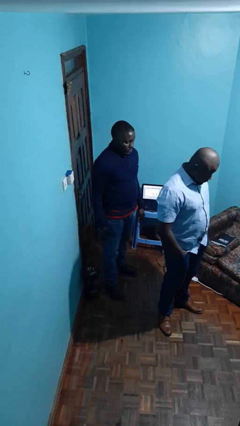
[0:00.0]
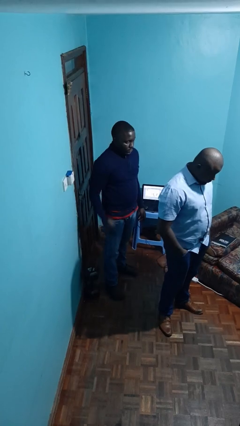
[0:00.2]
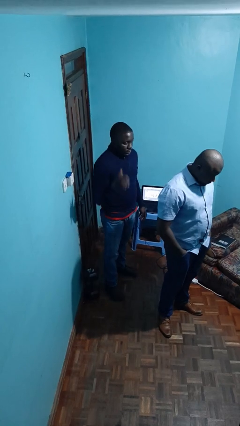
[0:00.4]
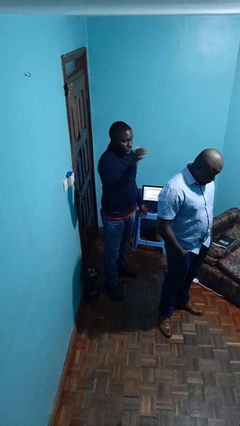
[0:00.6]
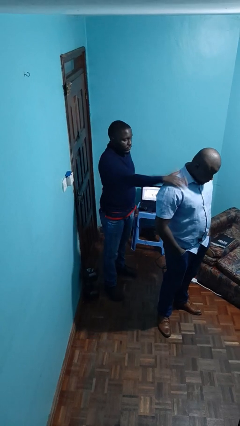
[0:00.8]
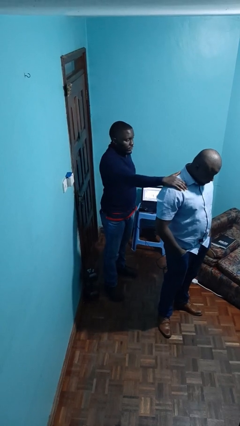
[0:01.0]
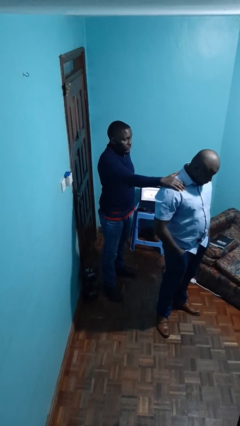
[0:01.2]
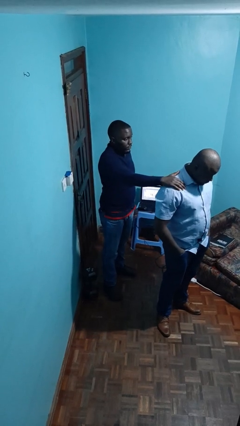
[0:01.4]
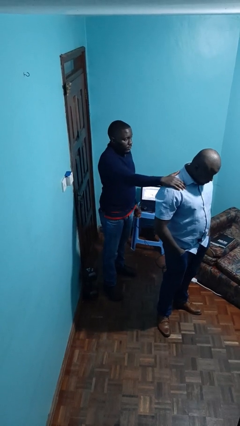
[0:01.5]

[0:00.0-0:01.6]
person grabs person by shoulder

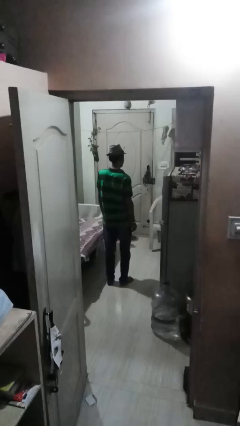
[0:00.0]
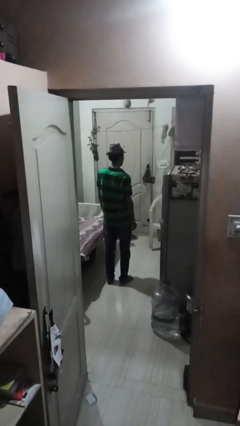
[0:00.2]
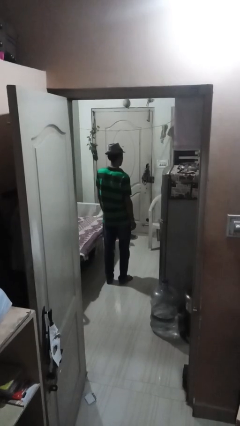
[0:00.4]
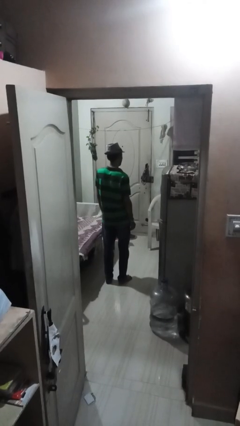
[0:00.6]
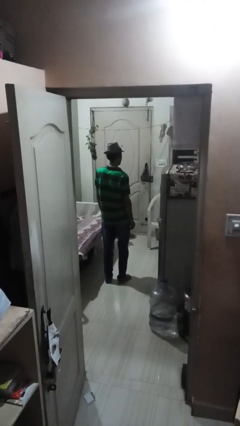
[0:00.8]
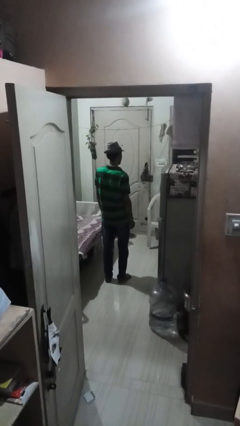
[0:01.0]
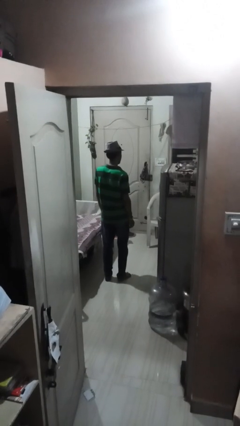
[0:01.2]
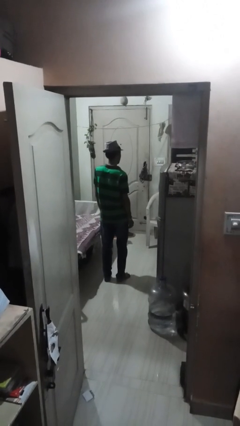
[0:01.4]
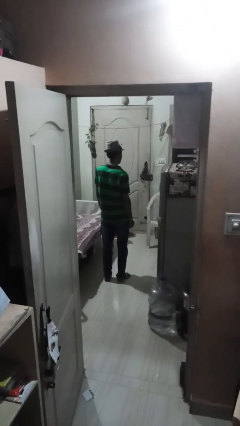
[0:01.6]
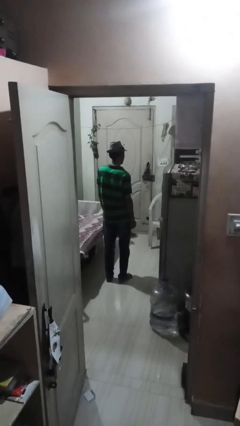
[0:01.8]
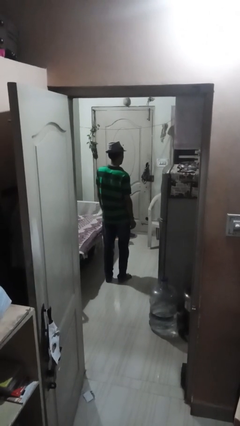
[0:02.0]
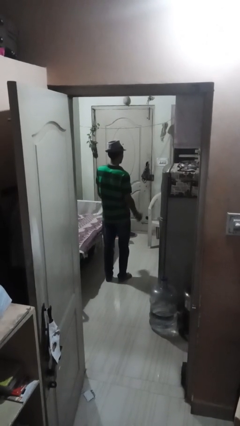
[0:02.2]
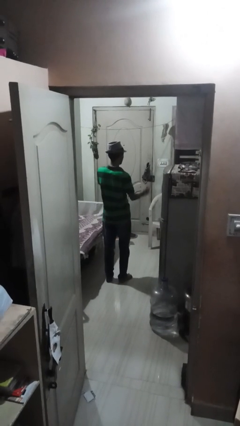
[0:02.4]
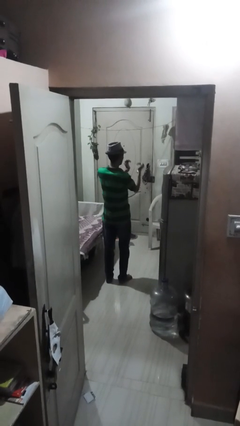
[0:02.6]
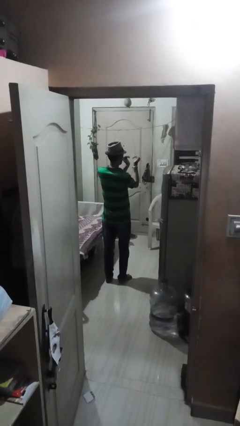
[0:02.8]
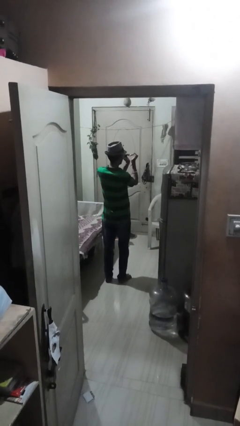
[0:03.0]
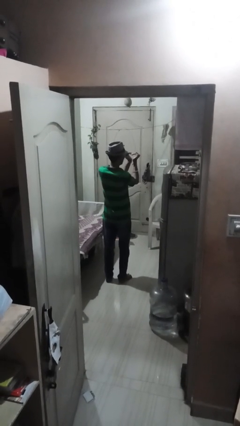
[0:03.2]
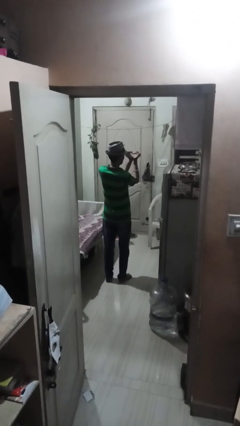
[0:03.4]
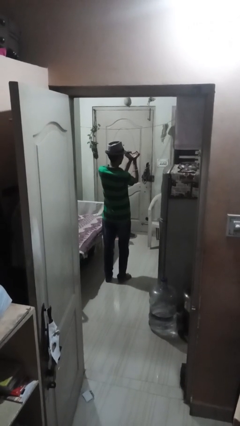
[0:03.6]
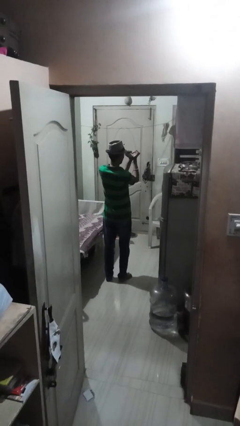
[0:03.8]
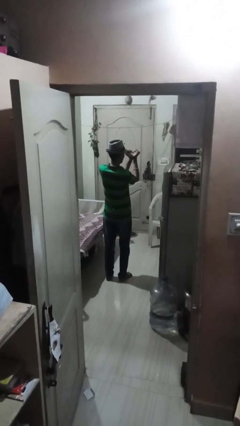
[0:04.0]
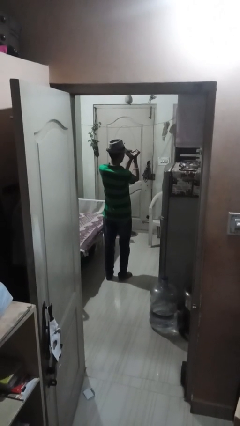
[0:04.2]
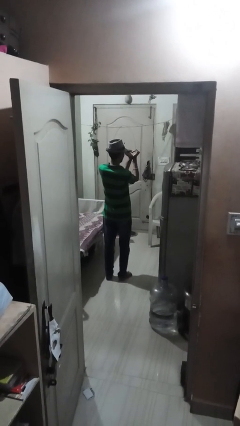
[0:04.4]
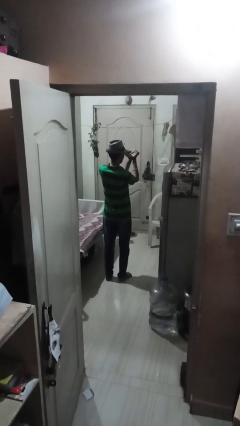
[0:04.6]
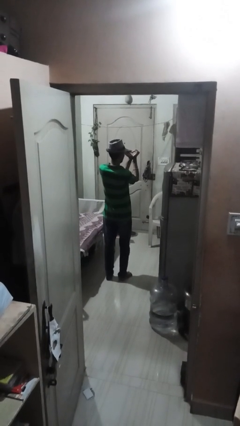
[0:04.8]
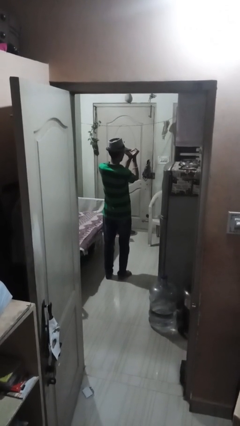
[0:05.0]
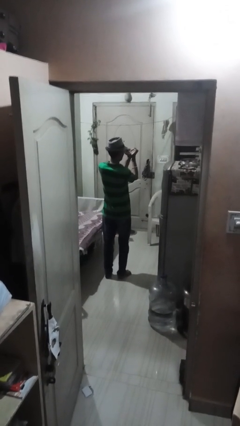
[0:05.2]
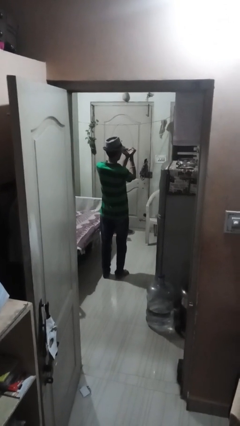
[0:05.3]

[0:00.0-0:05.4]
person gestures heart

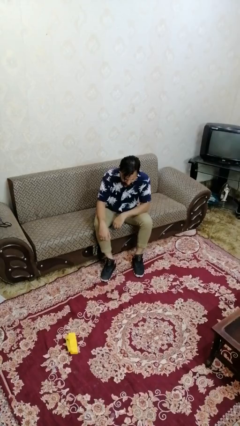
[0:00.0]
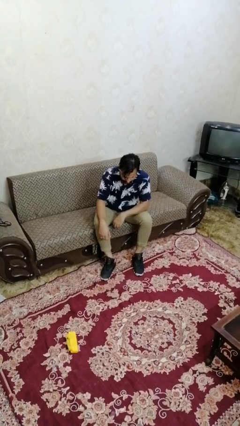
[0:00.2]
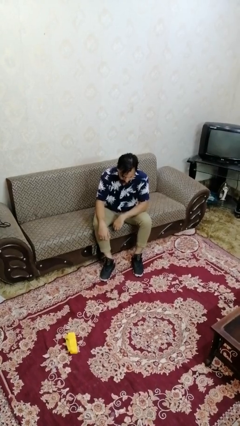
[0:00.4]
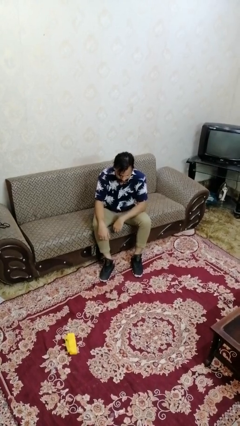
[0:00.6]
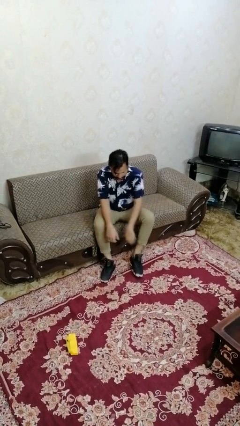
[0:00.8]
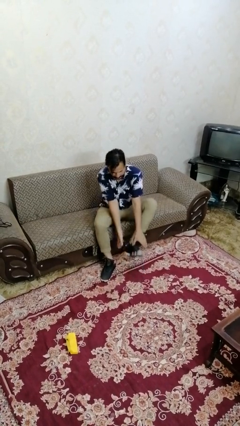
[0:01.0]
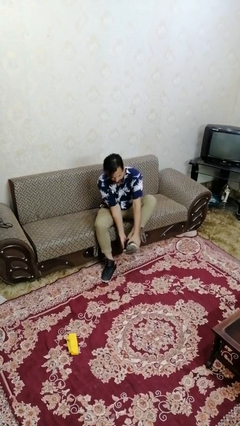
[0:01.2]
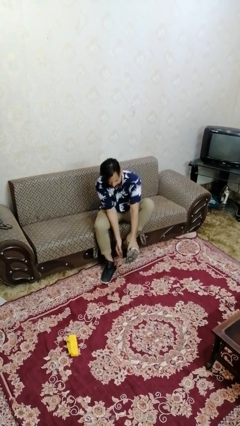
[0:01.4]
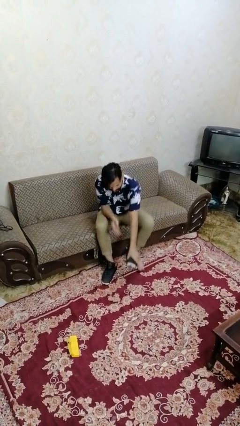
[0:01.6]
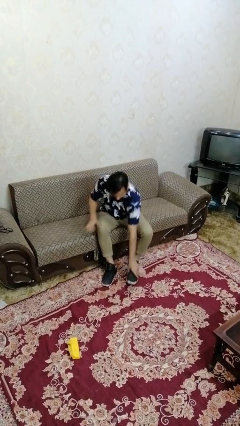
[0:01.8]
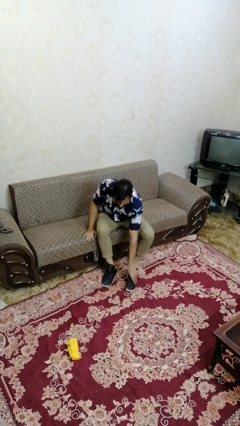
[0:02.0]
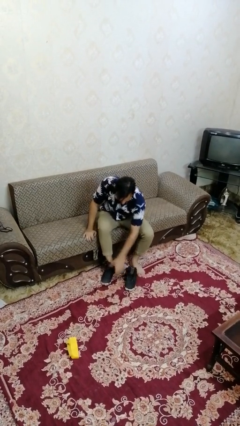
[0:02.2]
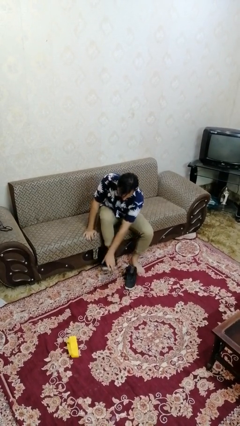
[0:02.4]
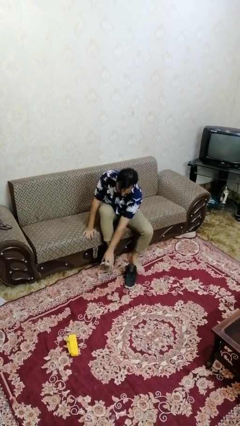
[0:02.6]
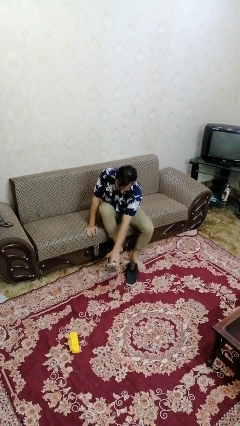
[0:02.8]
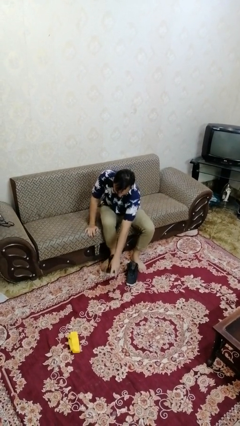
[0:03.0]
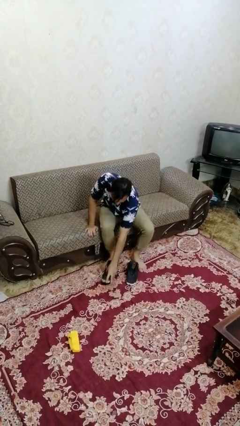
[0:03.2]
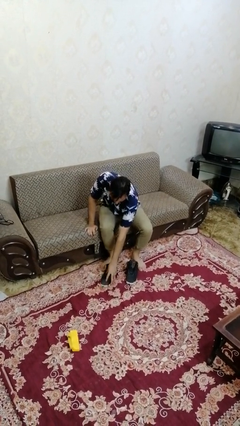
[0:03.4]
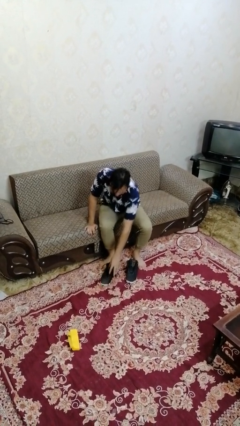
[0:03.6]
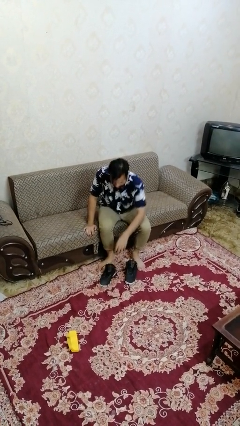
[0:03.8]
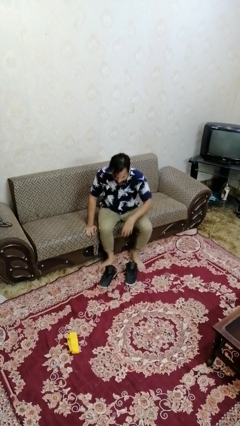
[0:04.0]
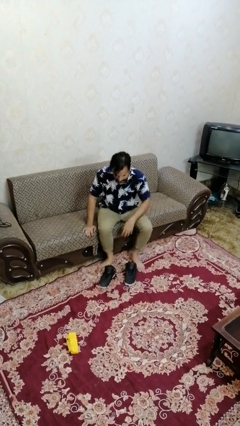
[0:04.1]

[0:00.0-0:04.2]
person takes off shoes

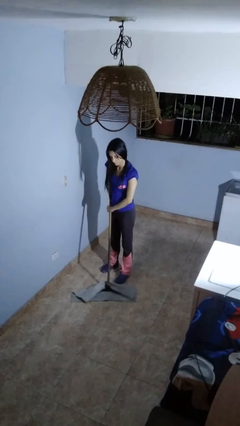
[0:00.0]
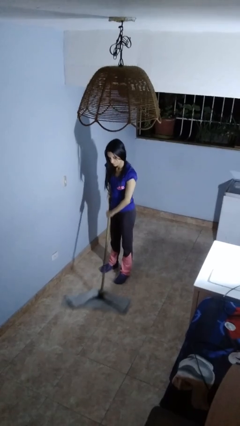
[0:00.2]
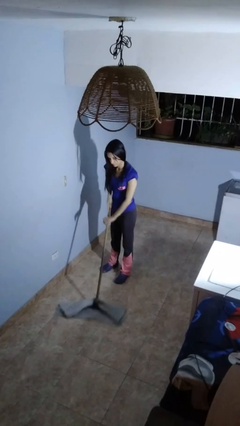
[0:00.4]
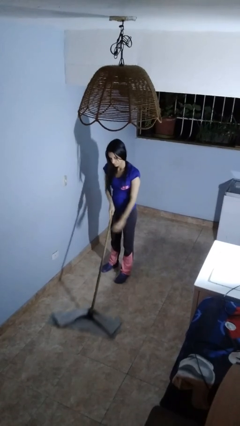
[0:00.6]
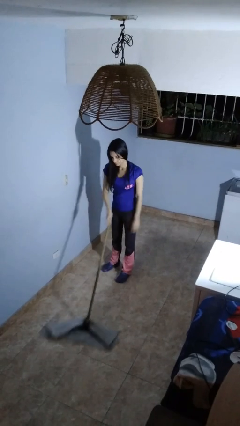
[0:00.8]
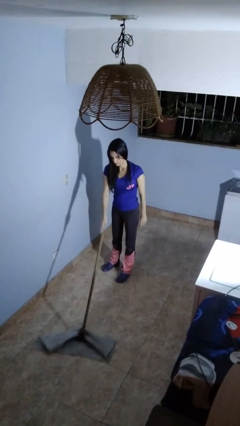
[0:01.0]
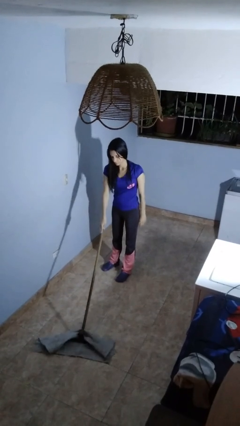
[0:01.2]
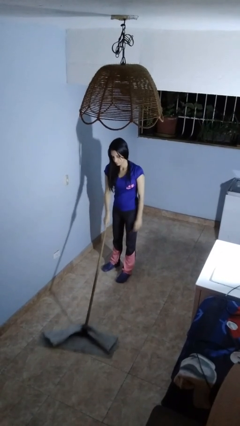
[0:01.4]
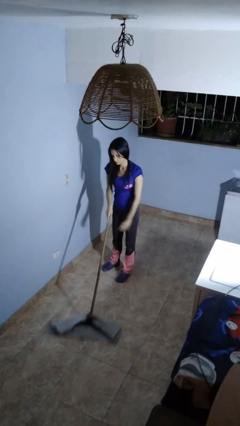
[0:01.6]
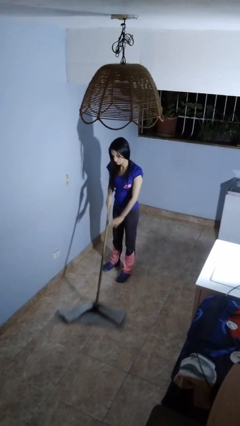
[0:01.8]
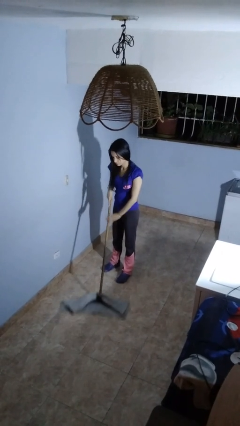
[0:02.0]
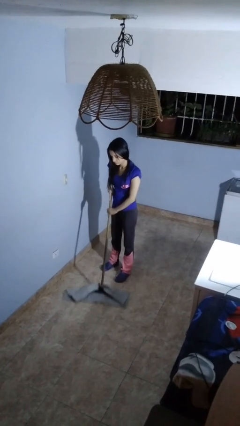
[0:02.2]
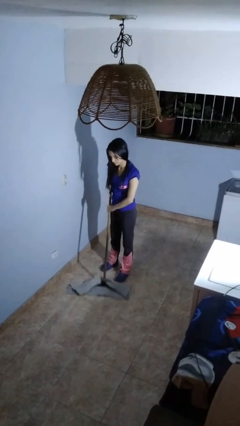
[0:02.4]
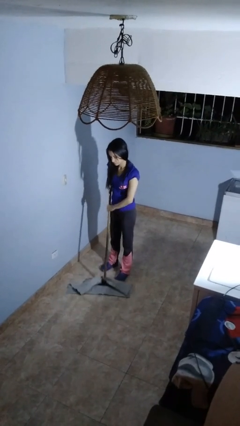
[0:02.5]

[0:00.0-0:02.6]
person mops

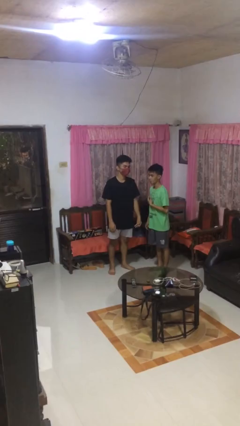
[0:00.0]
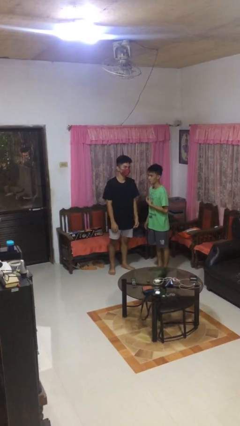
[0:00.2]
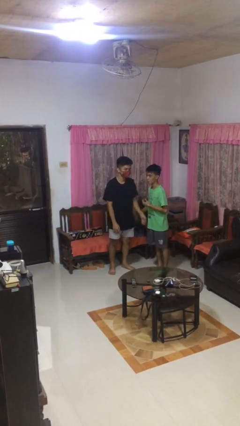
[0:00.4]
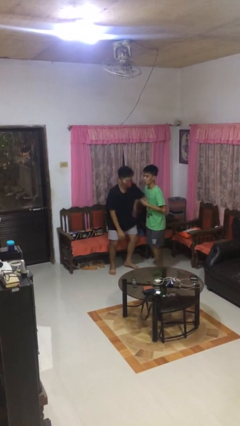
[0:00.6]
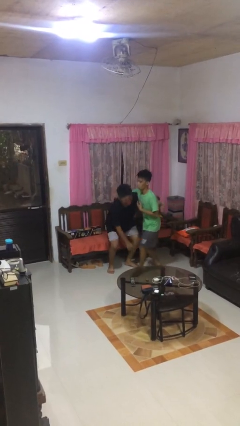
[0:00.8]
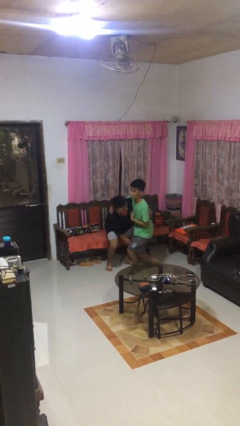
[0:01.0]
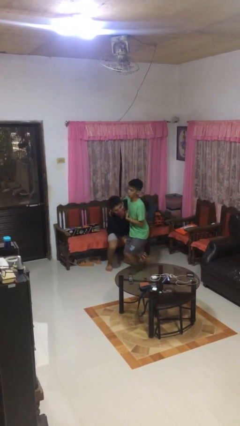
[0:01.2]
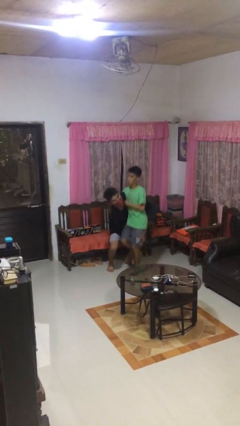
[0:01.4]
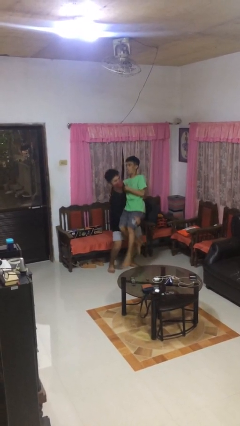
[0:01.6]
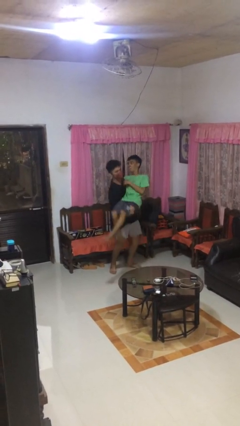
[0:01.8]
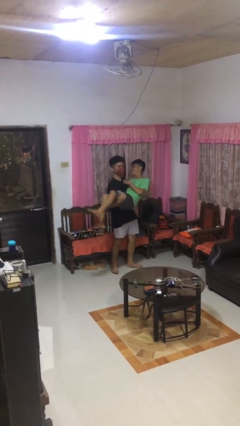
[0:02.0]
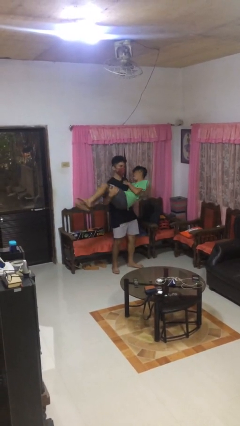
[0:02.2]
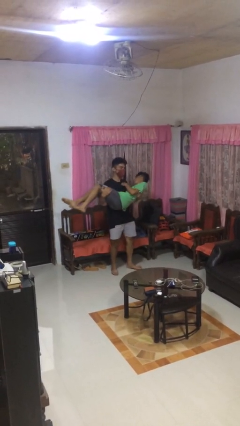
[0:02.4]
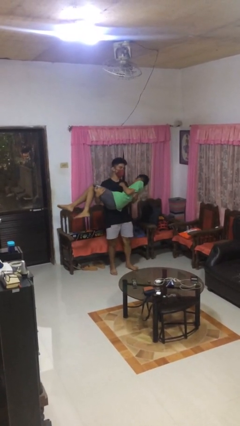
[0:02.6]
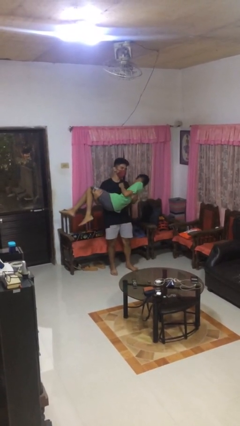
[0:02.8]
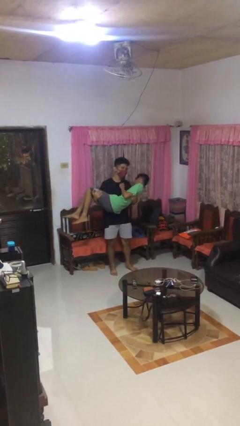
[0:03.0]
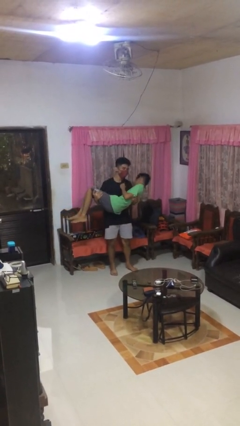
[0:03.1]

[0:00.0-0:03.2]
person picks up person

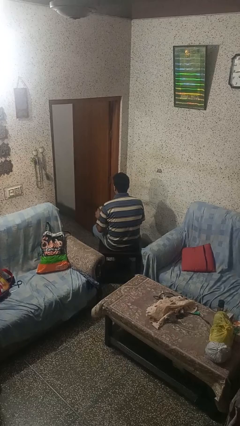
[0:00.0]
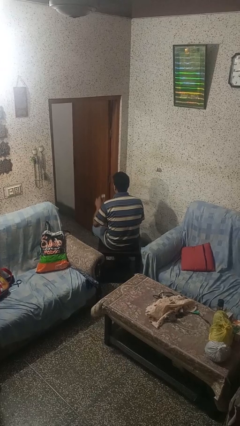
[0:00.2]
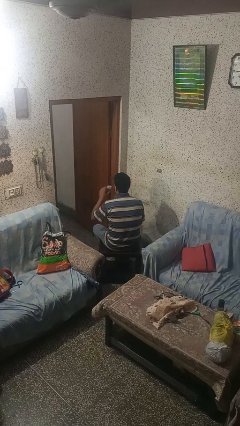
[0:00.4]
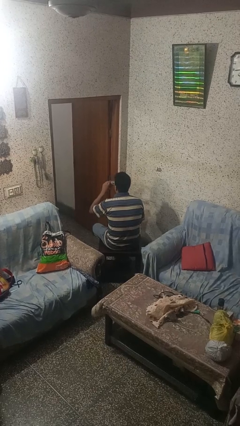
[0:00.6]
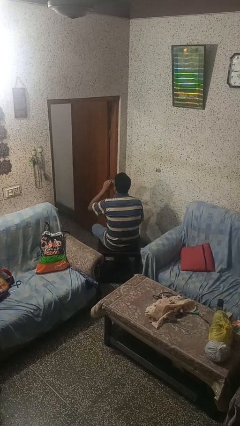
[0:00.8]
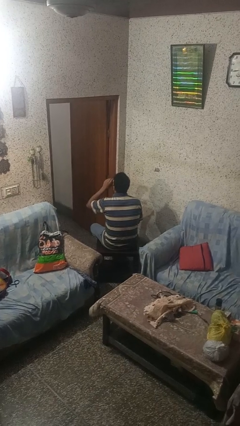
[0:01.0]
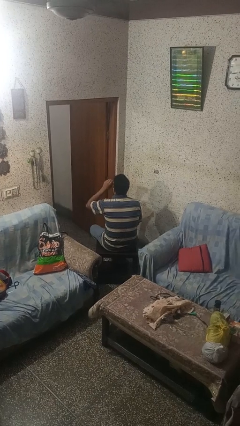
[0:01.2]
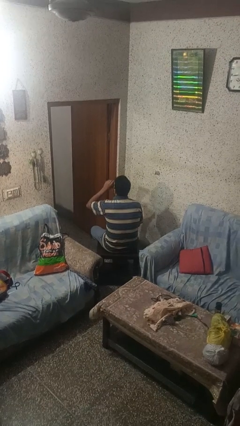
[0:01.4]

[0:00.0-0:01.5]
person drinks from beverage can
